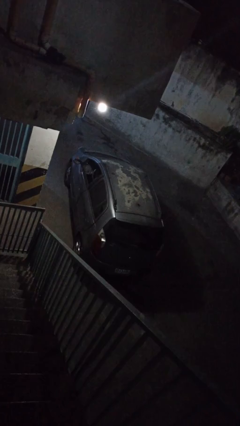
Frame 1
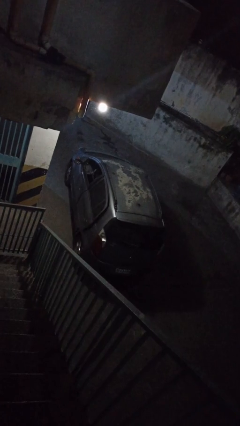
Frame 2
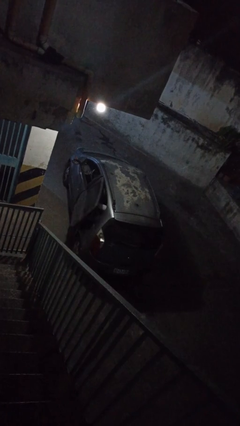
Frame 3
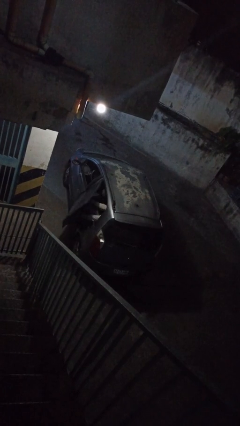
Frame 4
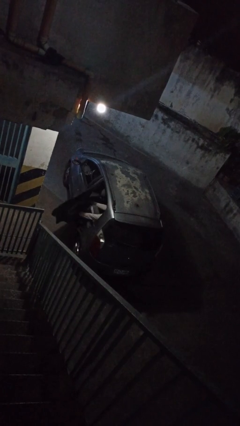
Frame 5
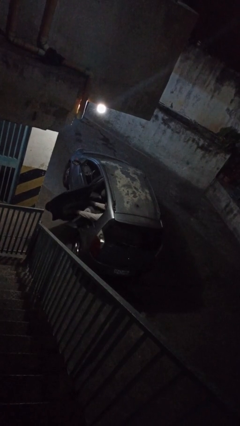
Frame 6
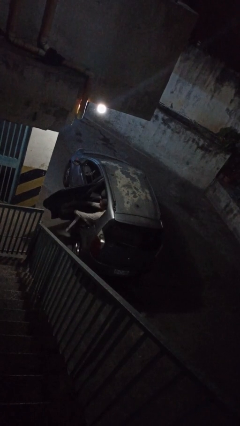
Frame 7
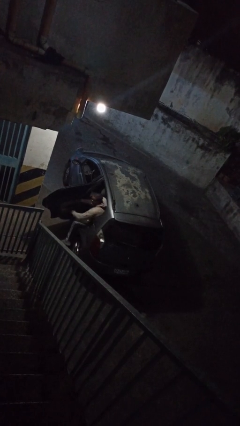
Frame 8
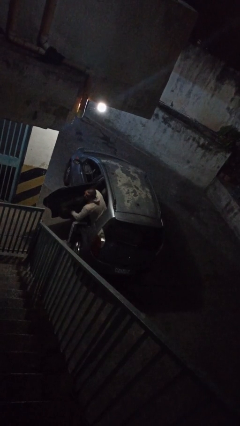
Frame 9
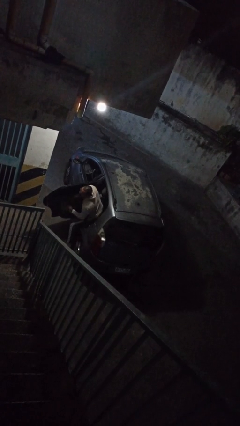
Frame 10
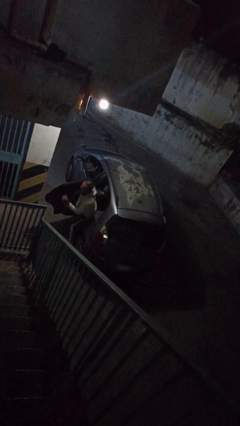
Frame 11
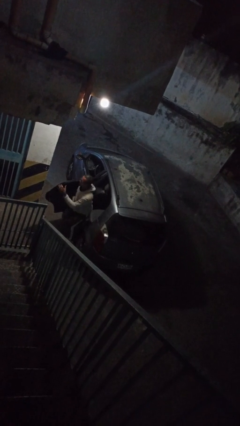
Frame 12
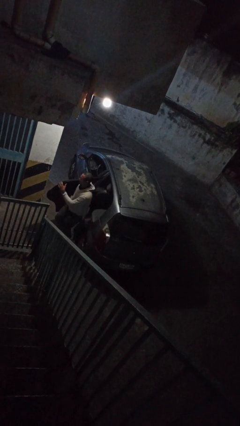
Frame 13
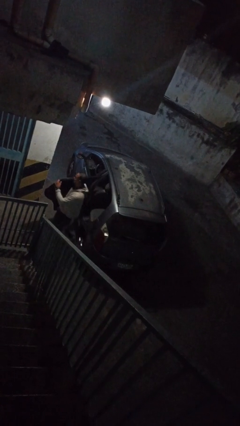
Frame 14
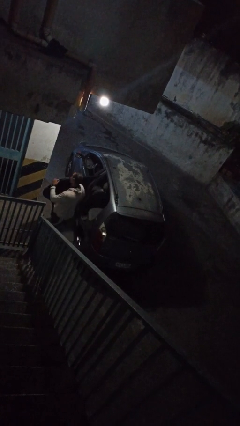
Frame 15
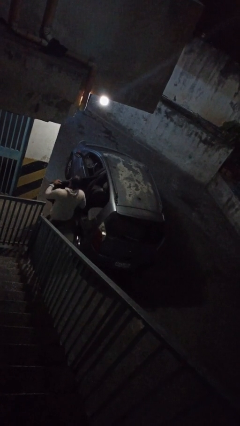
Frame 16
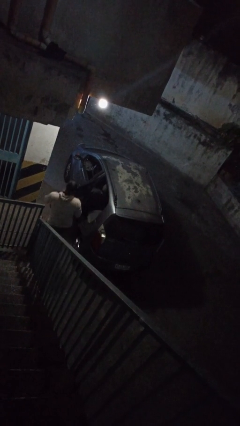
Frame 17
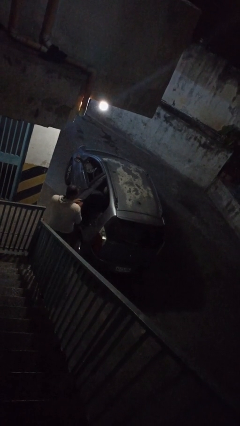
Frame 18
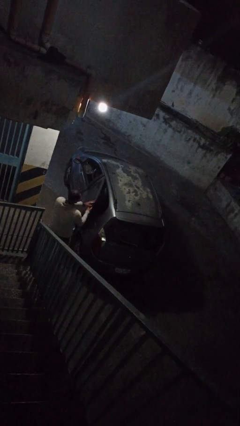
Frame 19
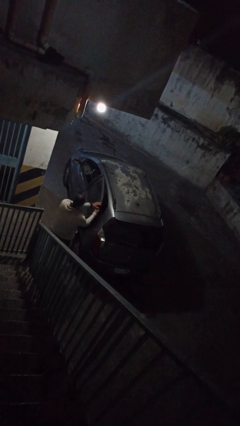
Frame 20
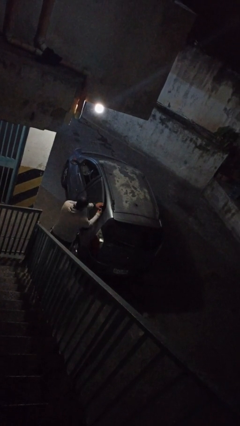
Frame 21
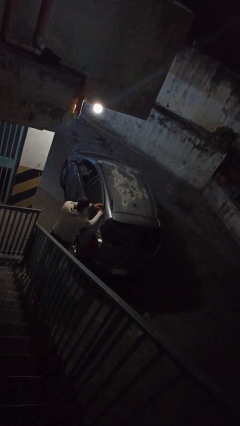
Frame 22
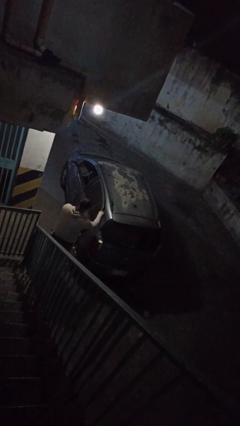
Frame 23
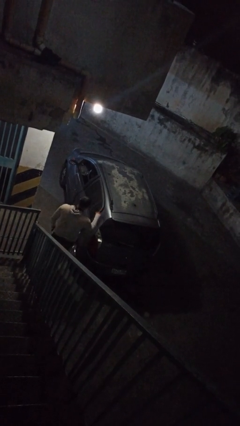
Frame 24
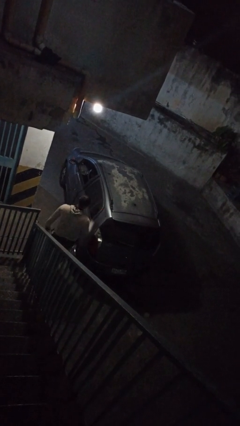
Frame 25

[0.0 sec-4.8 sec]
car drops off person

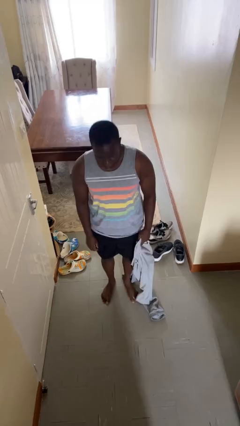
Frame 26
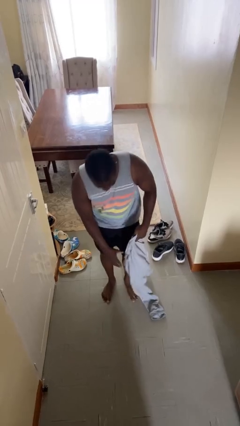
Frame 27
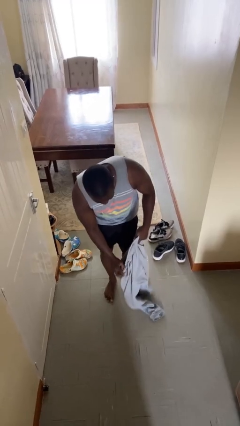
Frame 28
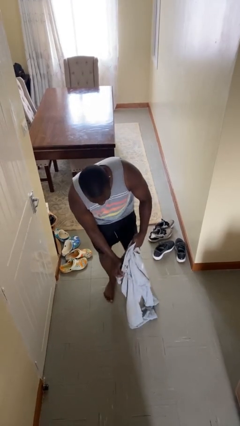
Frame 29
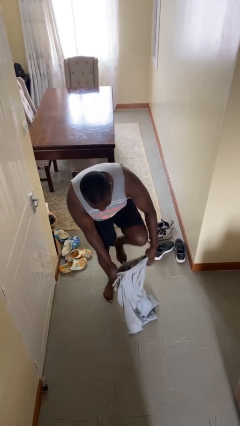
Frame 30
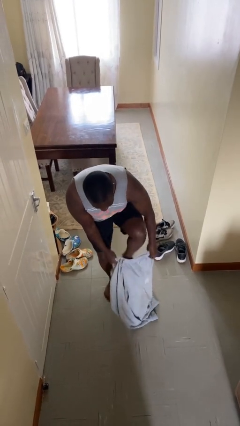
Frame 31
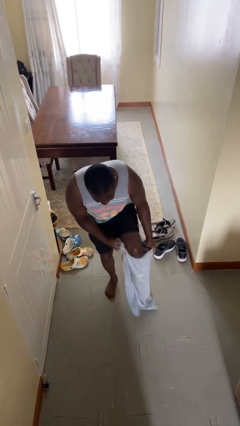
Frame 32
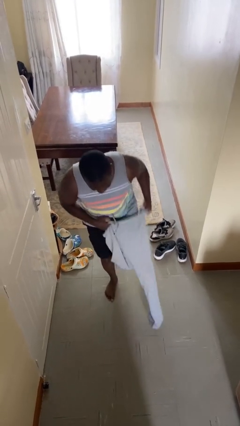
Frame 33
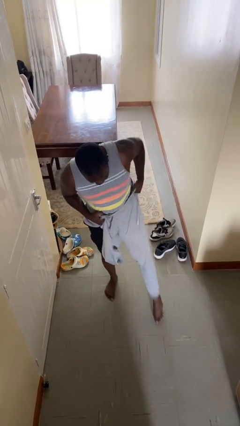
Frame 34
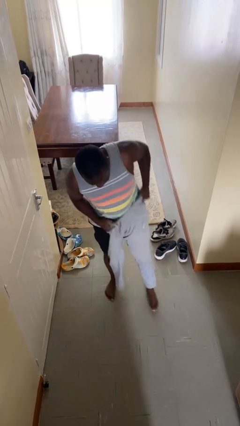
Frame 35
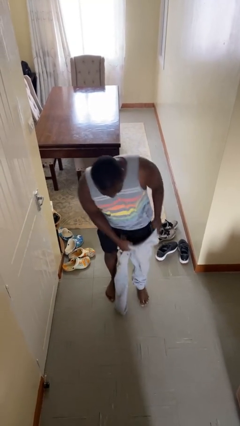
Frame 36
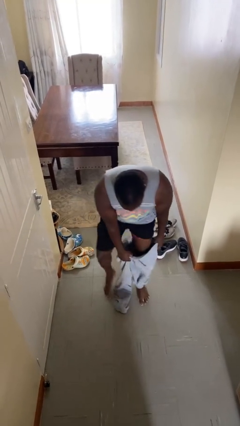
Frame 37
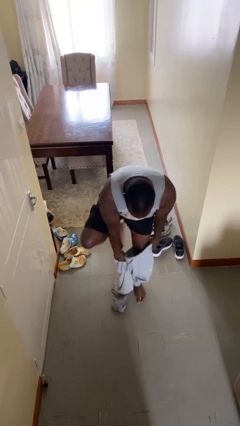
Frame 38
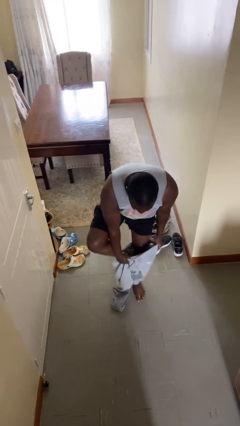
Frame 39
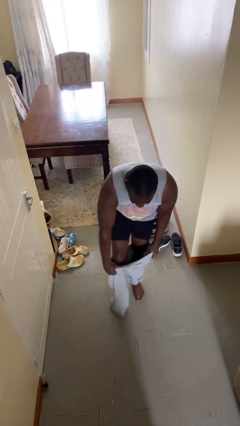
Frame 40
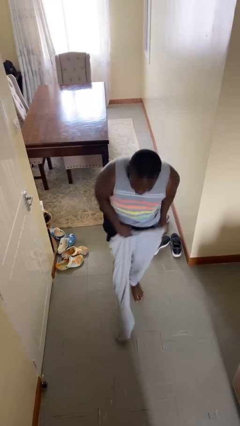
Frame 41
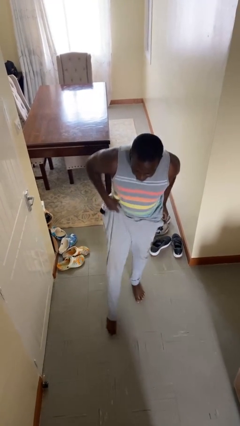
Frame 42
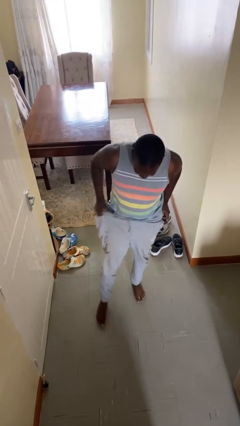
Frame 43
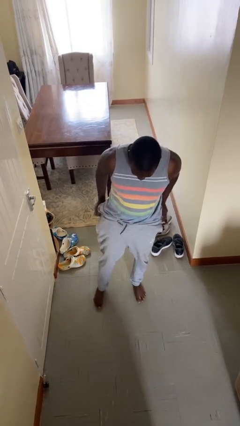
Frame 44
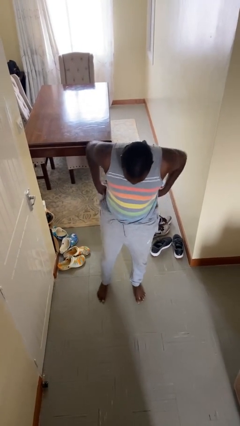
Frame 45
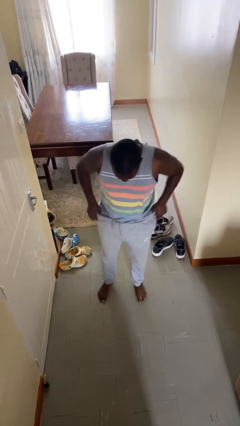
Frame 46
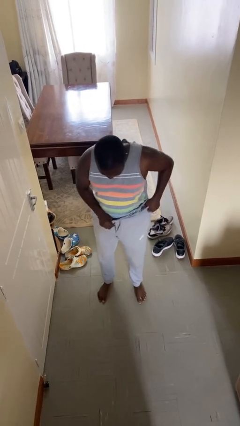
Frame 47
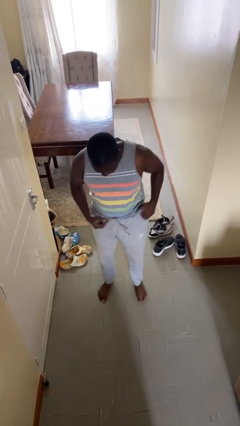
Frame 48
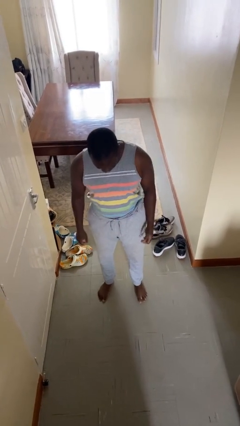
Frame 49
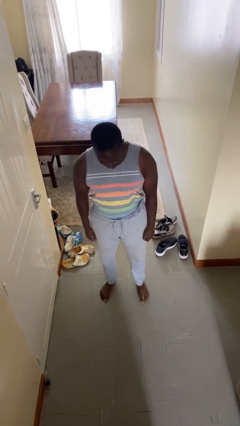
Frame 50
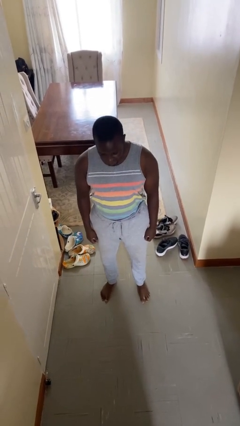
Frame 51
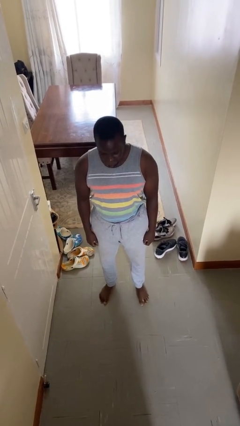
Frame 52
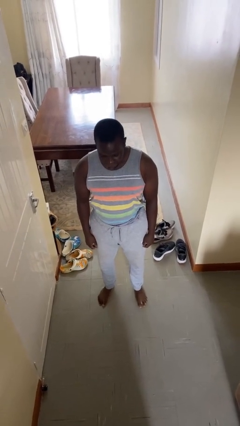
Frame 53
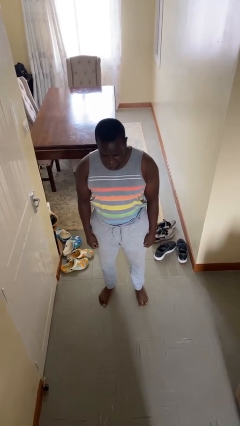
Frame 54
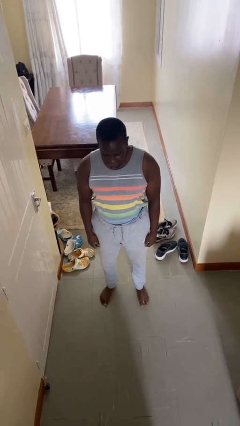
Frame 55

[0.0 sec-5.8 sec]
person puts on pants

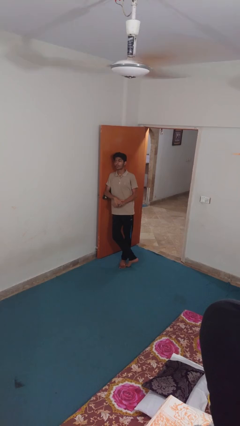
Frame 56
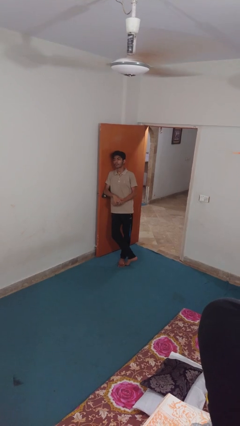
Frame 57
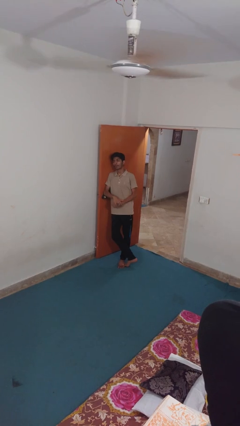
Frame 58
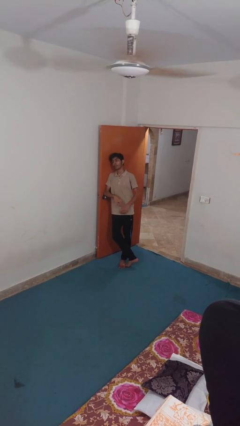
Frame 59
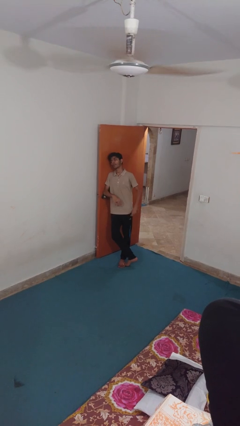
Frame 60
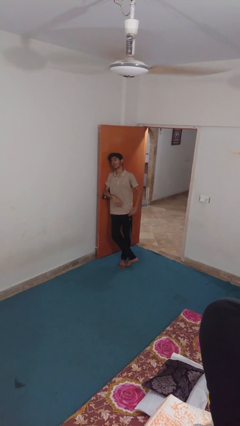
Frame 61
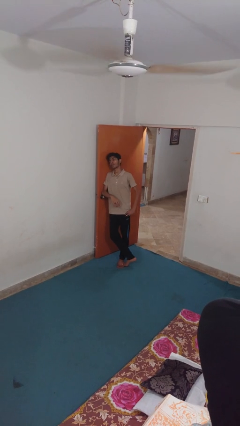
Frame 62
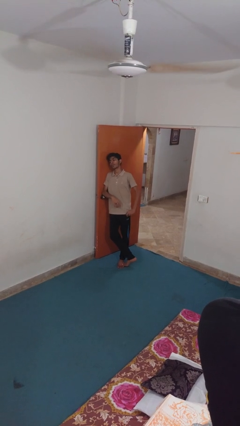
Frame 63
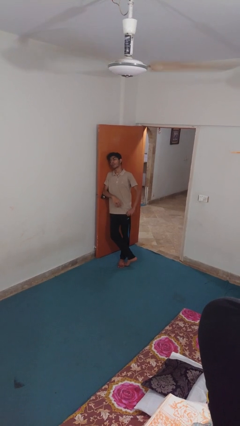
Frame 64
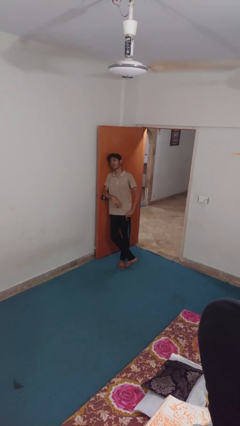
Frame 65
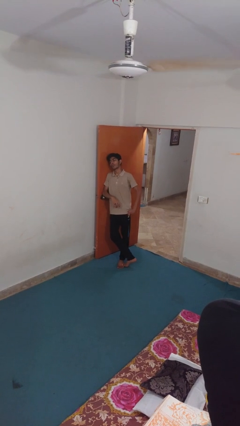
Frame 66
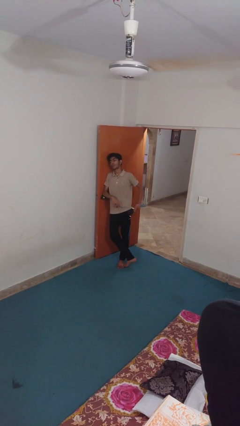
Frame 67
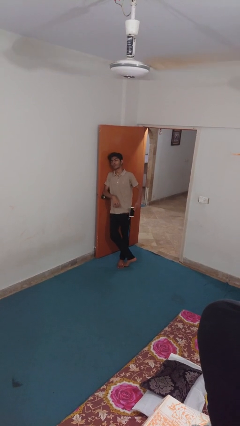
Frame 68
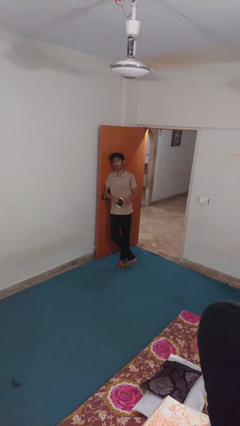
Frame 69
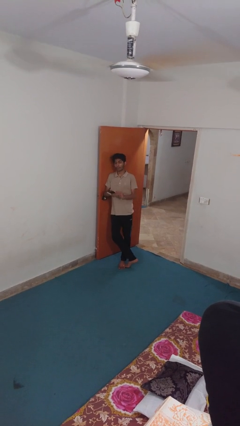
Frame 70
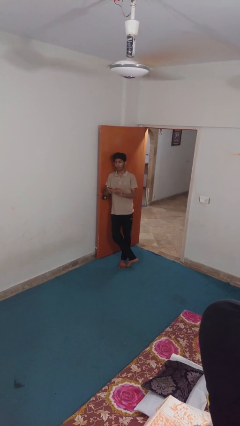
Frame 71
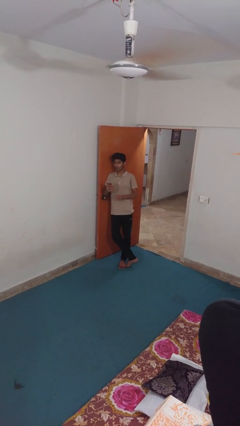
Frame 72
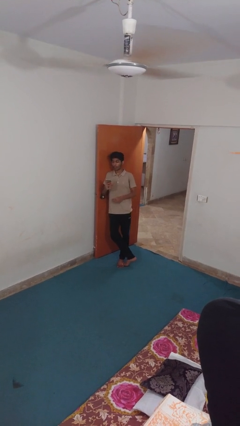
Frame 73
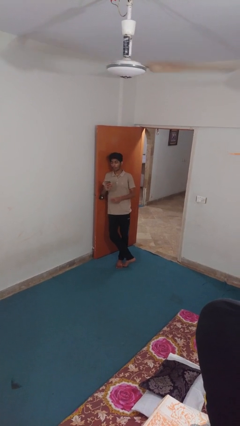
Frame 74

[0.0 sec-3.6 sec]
person takes phone from pocket

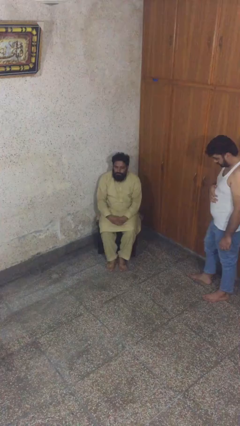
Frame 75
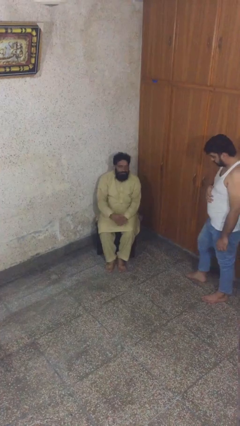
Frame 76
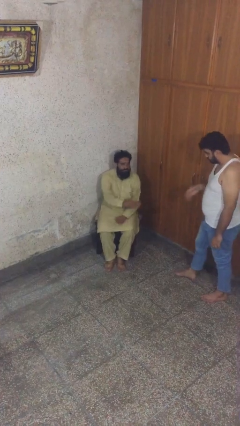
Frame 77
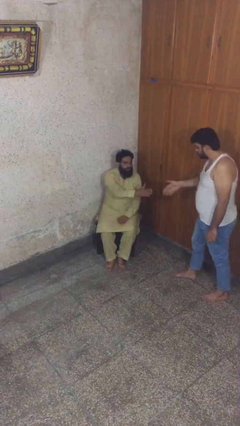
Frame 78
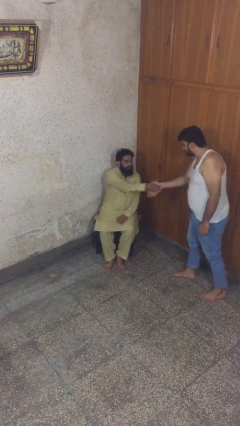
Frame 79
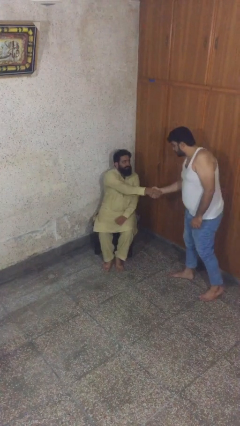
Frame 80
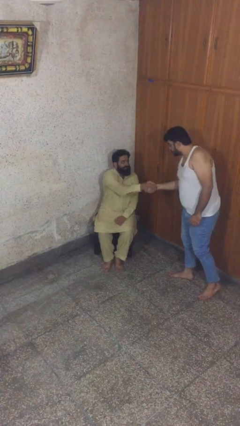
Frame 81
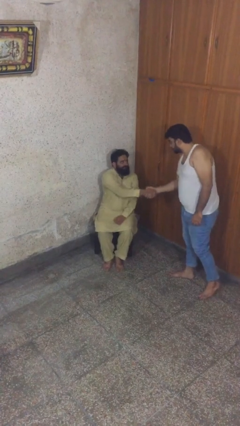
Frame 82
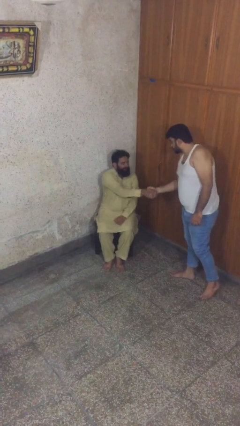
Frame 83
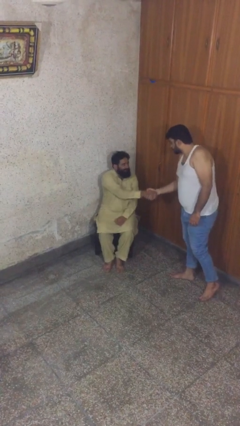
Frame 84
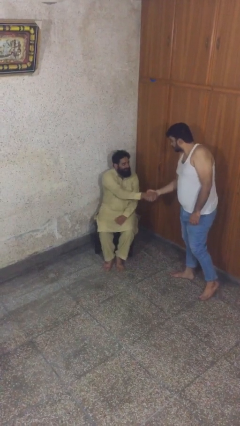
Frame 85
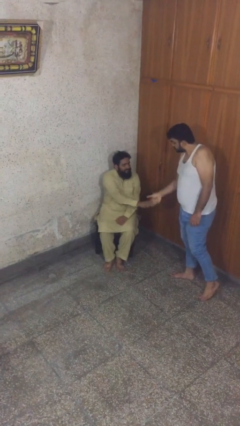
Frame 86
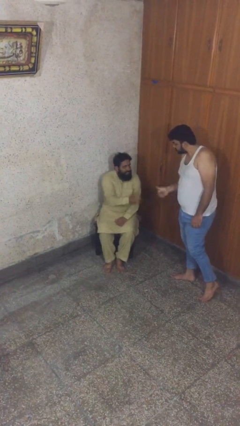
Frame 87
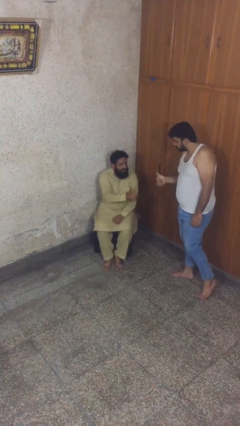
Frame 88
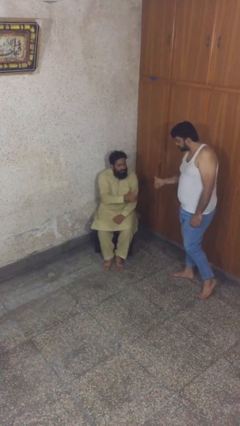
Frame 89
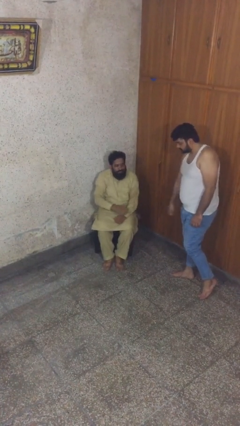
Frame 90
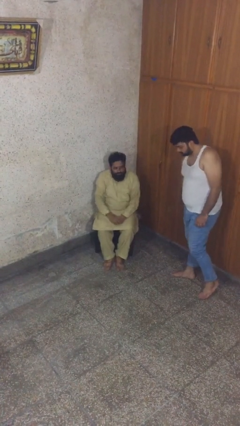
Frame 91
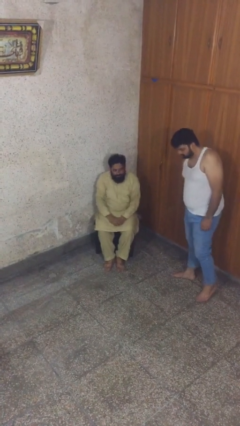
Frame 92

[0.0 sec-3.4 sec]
person shakes hand

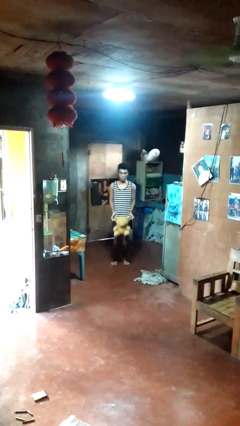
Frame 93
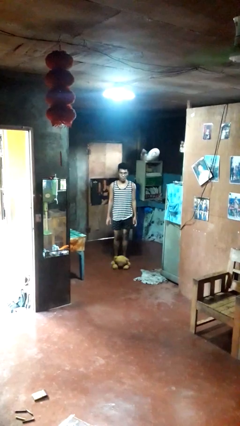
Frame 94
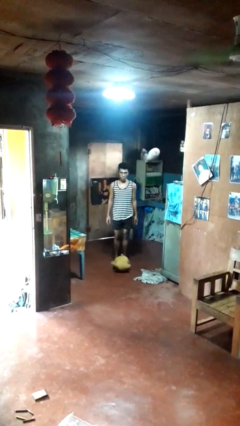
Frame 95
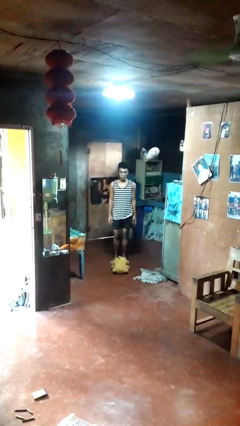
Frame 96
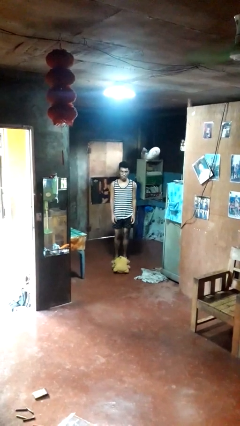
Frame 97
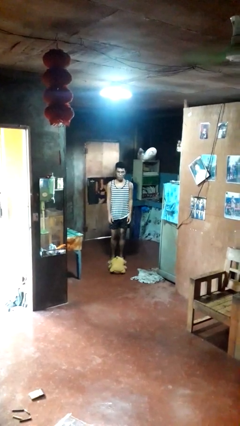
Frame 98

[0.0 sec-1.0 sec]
person drops object
